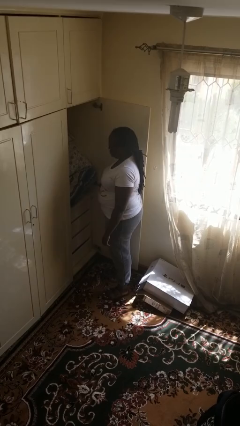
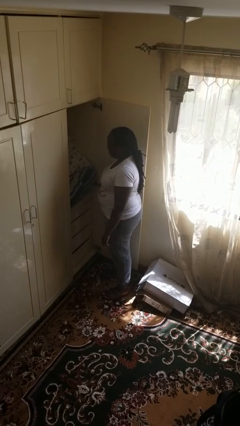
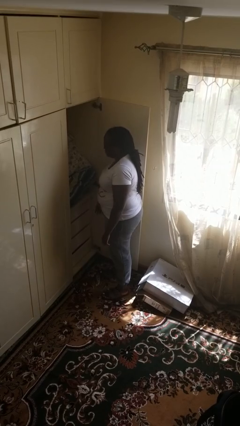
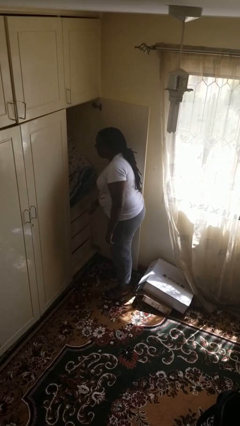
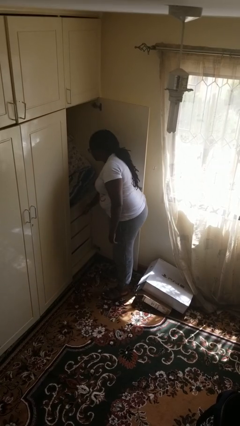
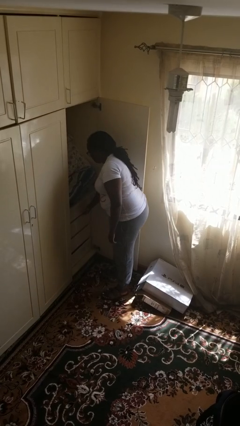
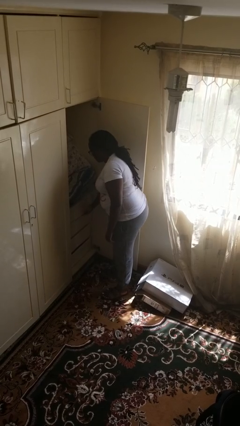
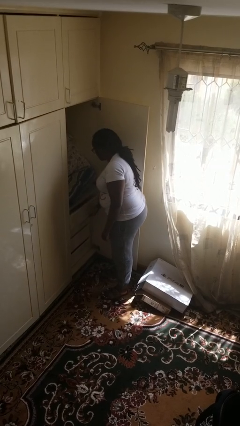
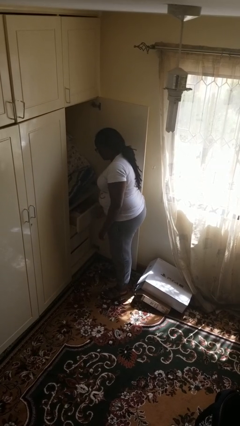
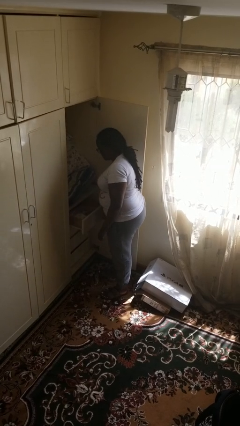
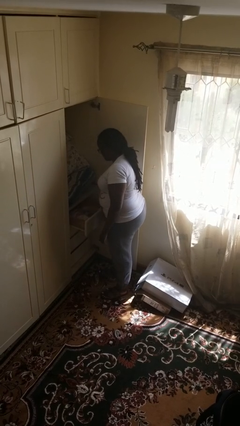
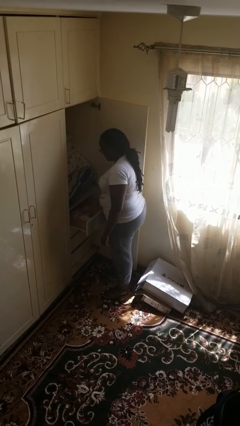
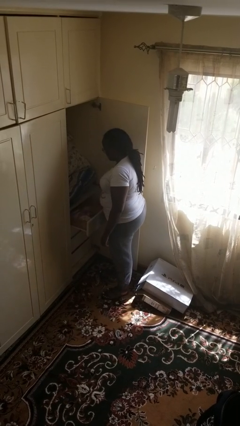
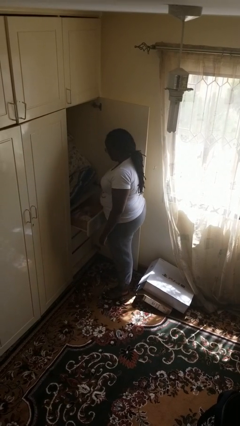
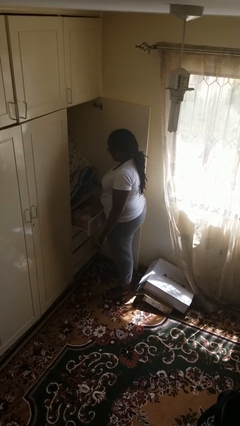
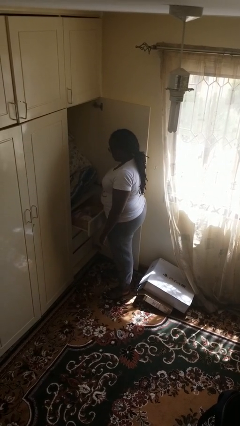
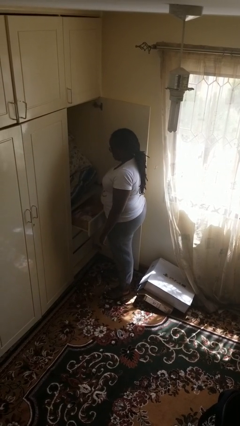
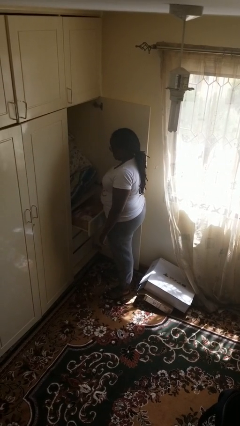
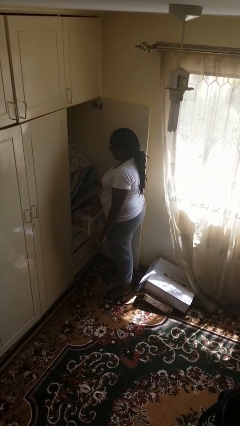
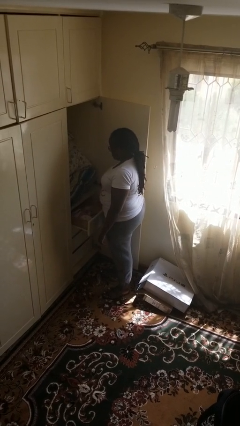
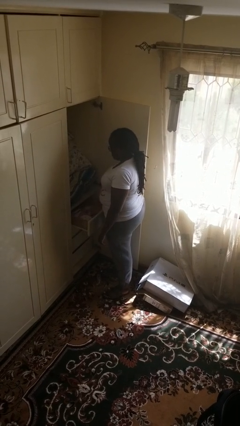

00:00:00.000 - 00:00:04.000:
person opens dresser drawer

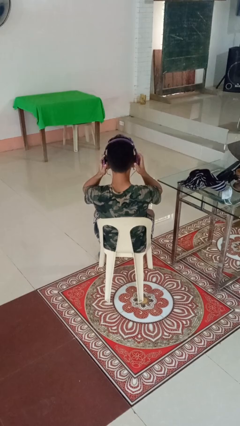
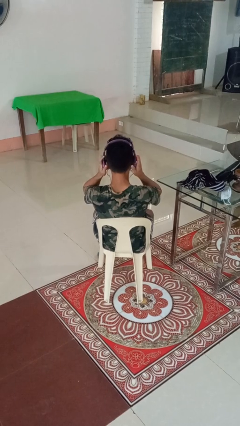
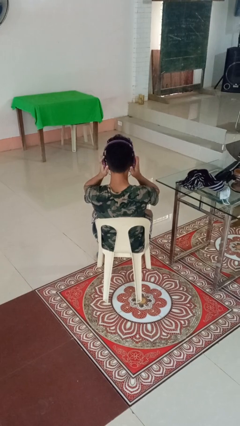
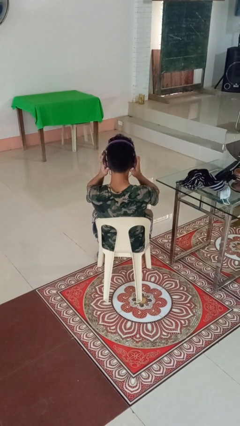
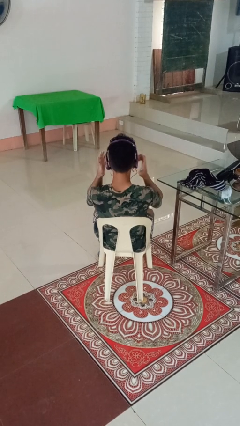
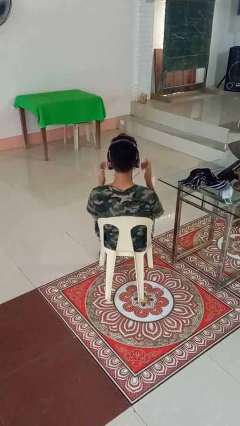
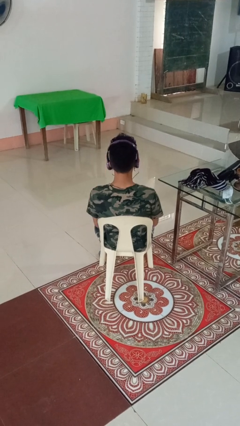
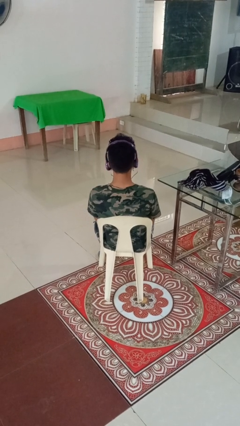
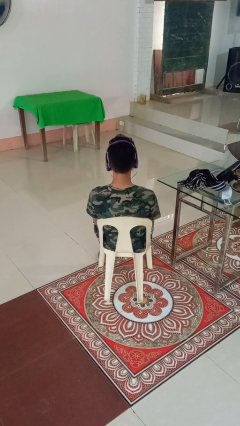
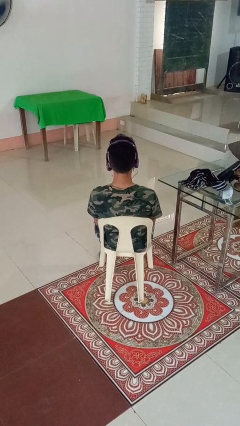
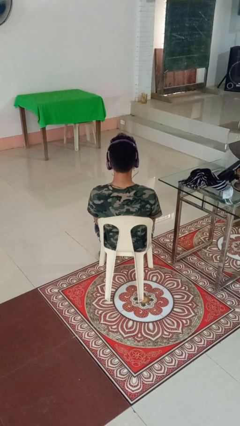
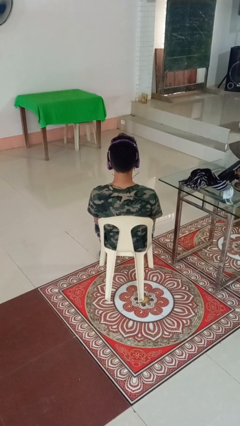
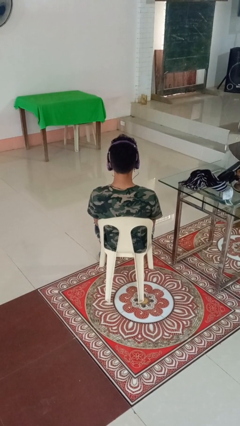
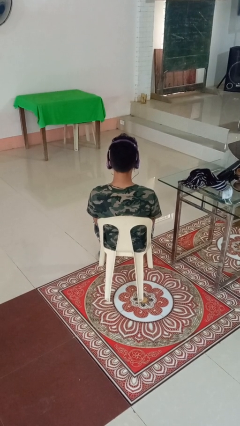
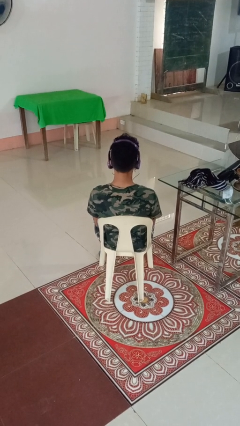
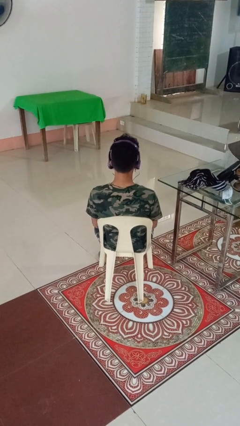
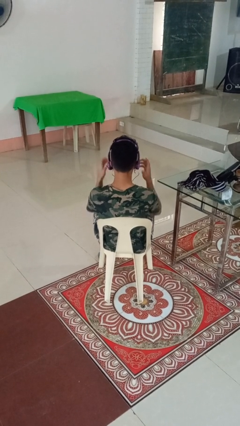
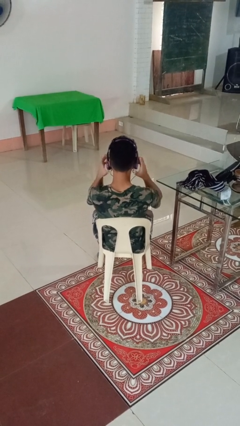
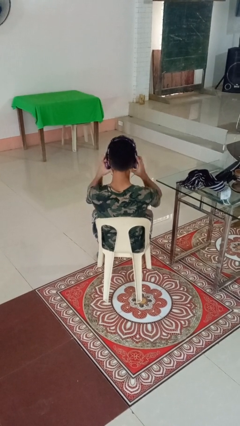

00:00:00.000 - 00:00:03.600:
person puts on headphones

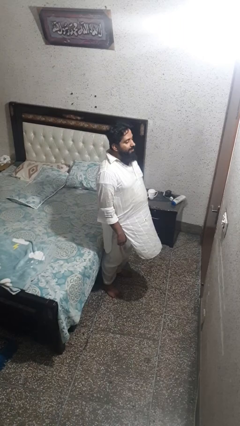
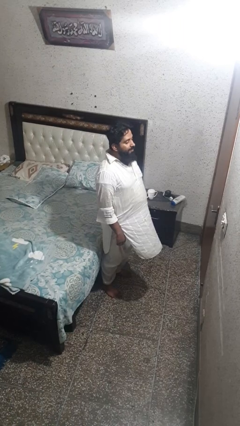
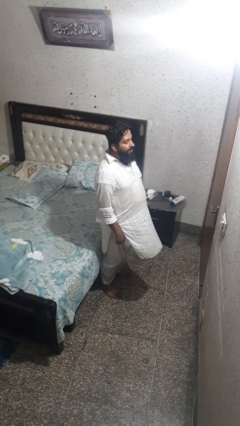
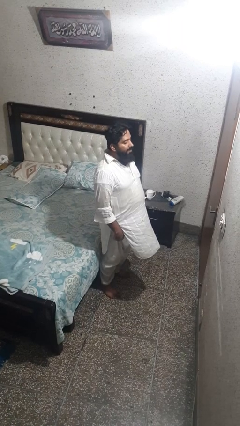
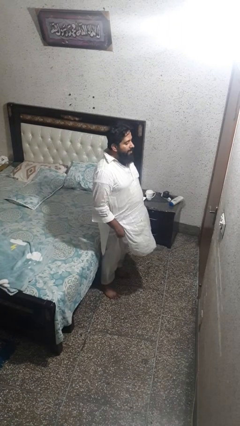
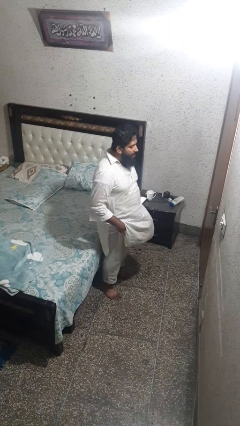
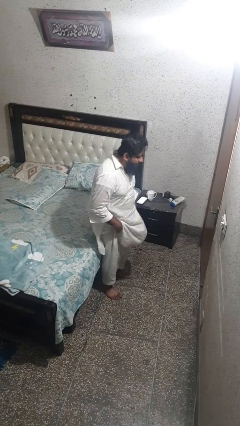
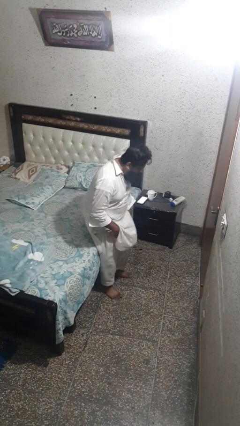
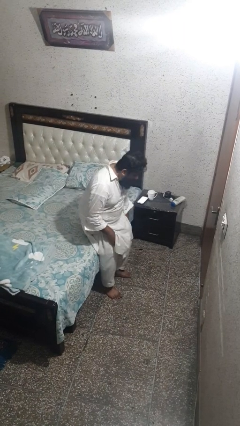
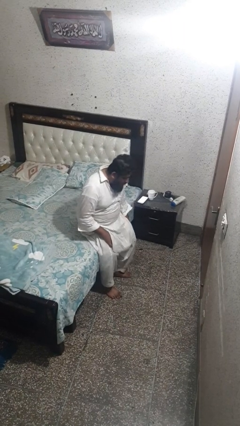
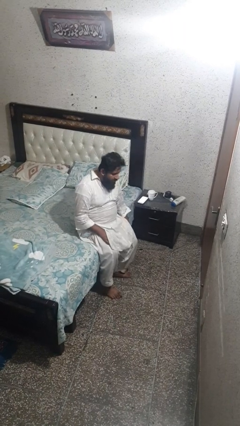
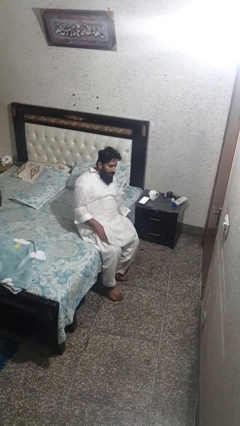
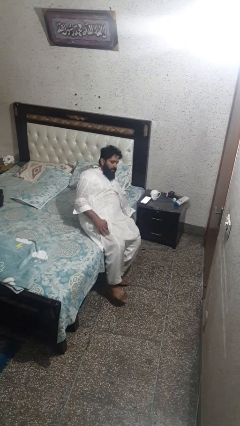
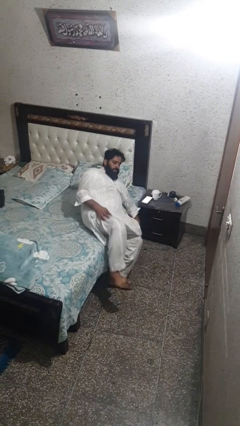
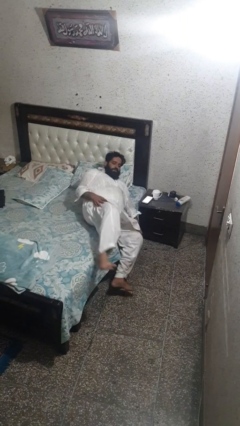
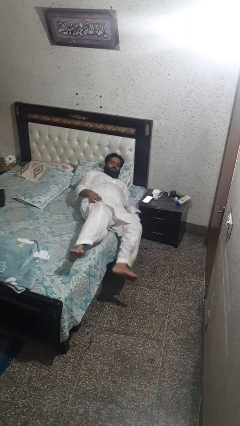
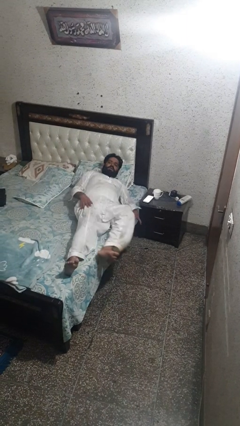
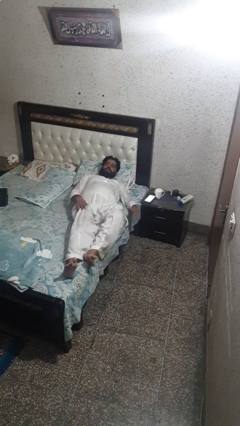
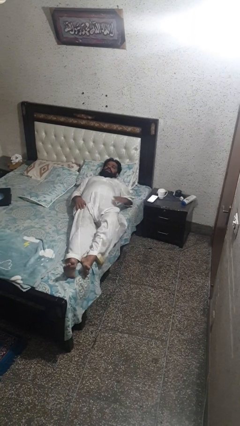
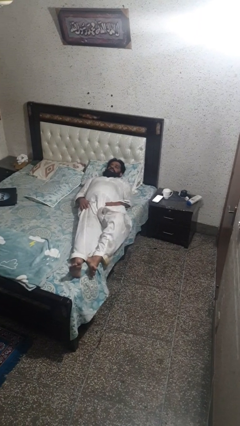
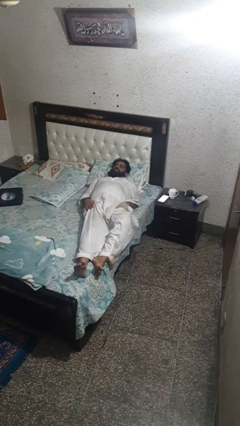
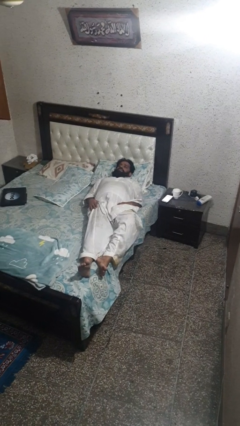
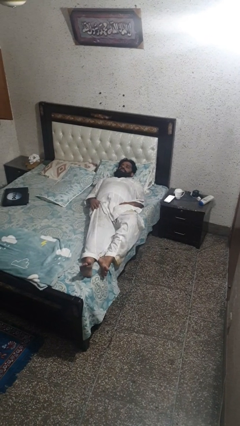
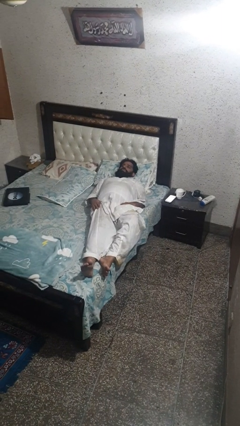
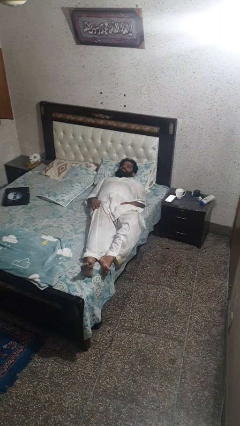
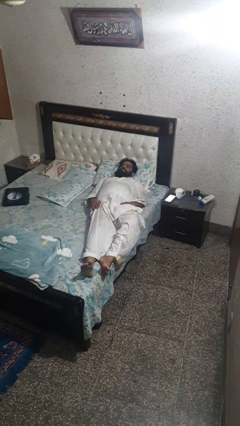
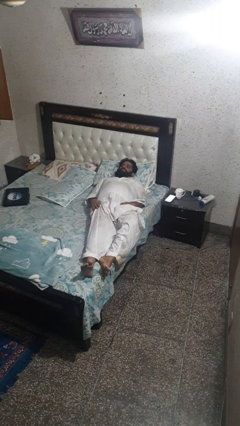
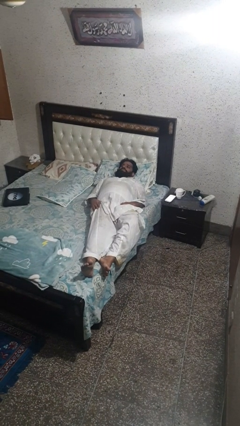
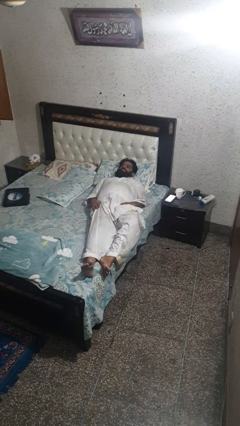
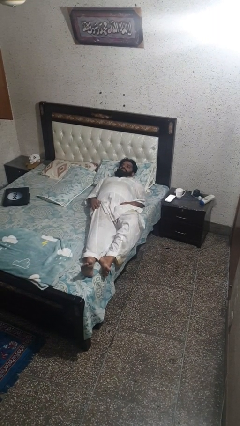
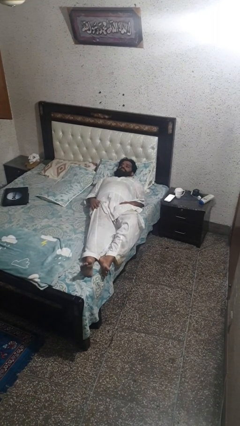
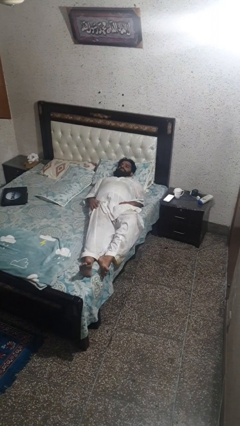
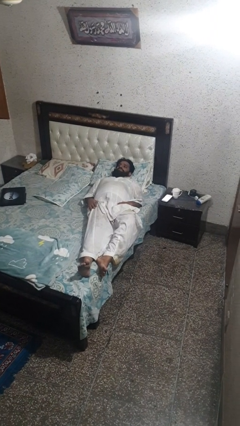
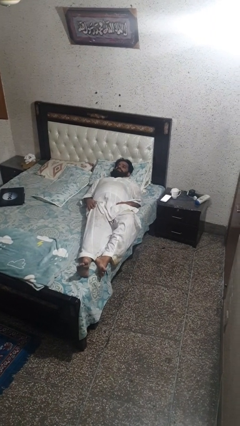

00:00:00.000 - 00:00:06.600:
person lies down on bed

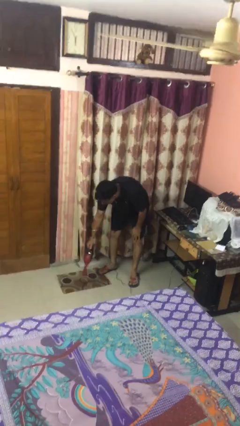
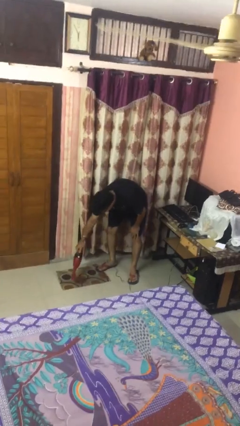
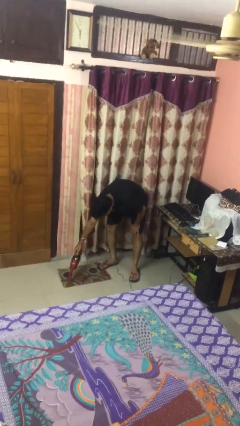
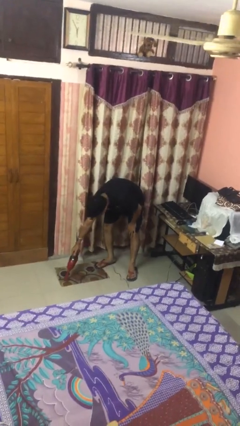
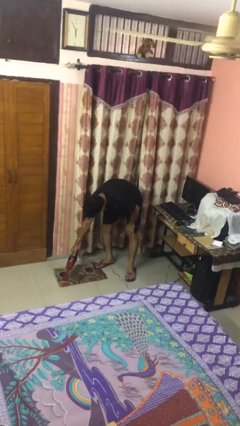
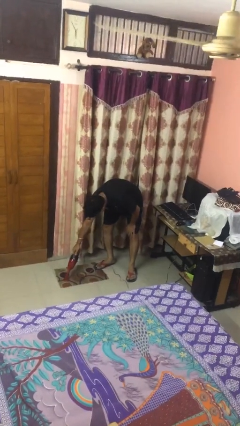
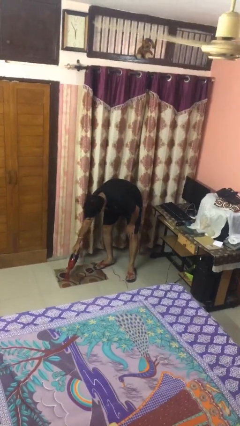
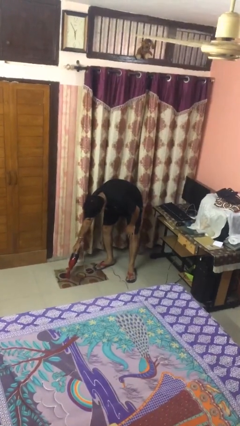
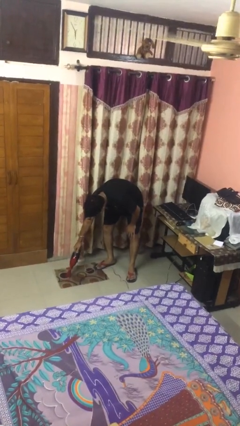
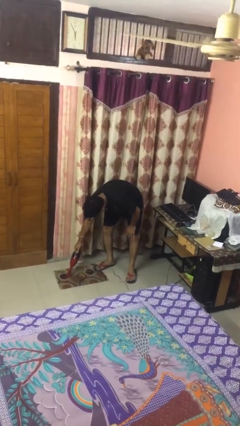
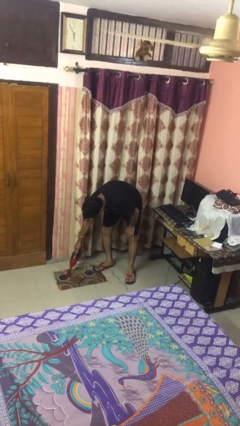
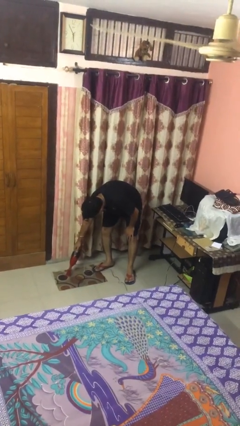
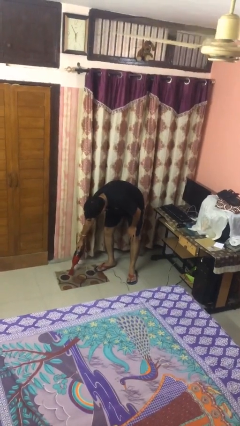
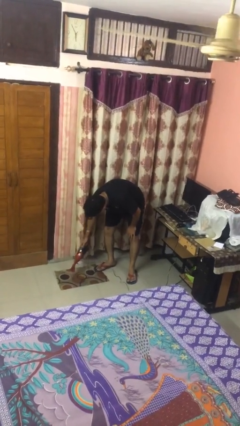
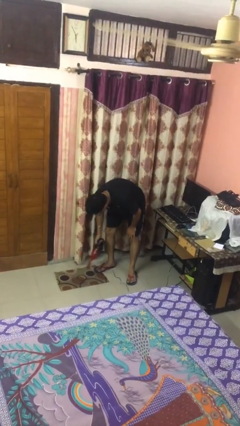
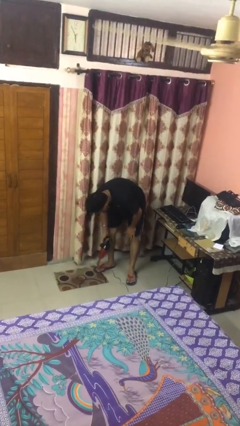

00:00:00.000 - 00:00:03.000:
person vacuums carpet

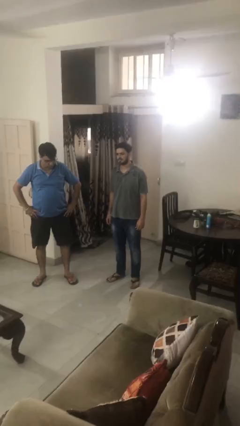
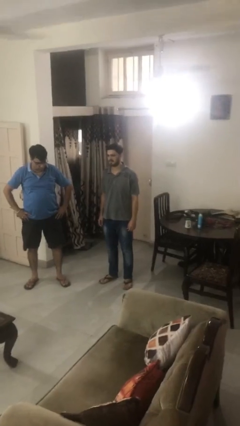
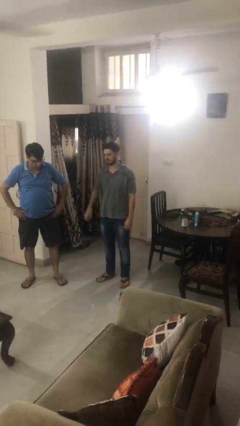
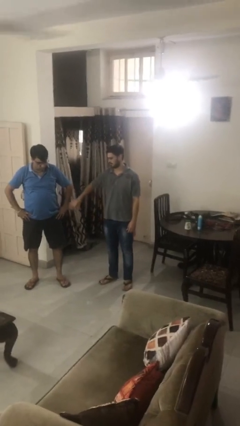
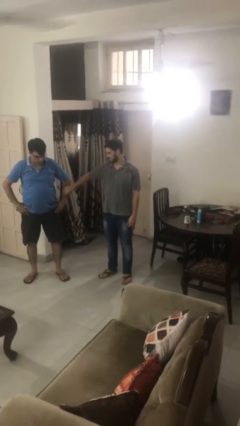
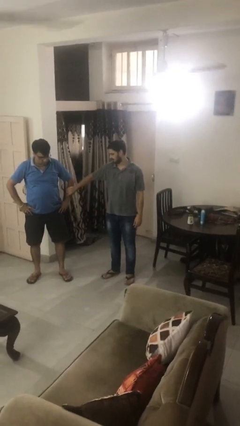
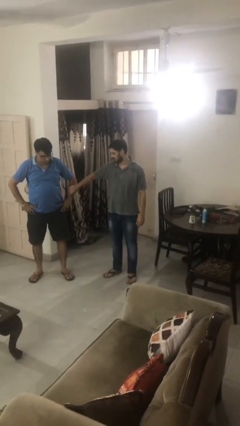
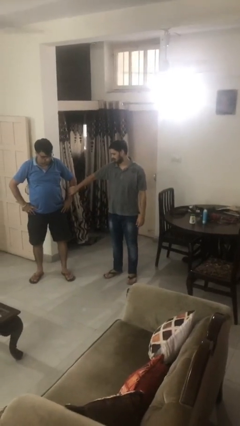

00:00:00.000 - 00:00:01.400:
person grabs person by forearm
